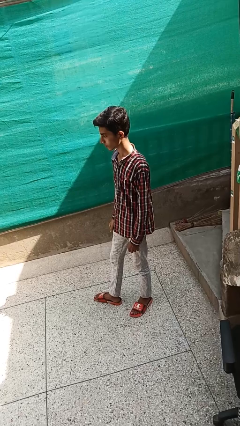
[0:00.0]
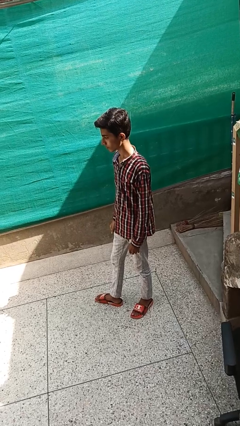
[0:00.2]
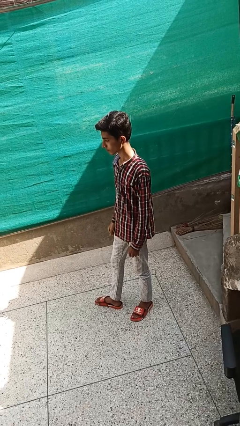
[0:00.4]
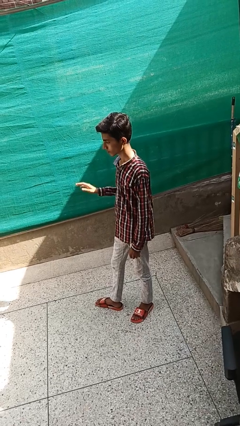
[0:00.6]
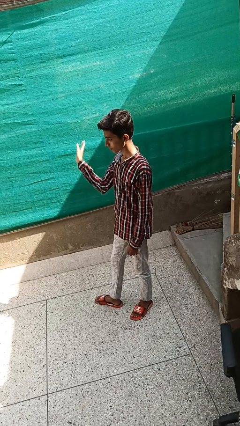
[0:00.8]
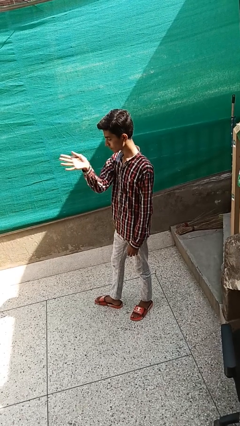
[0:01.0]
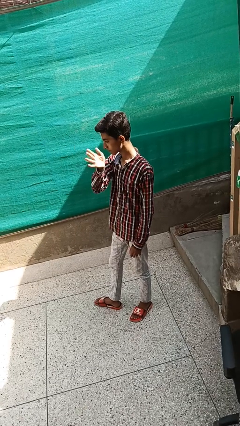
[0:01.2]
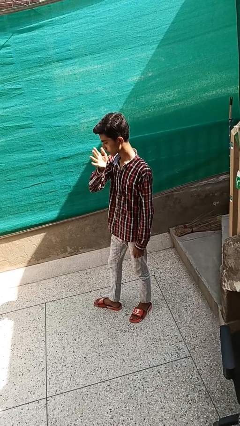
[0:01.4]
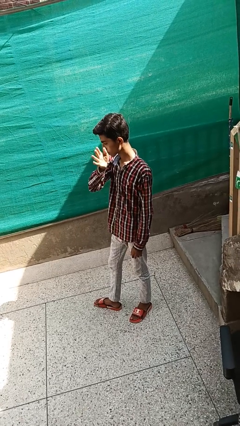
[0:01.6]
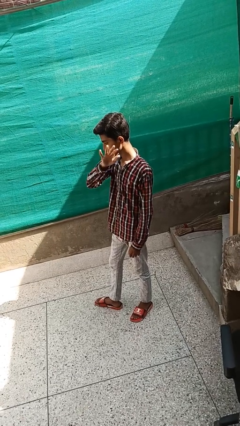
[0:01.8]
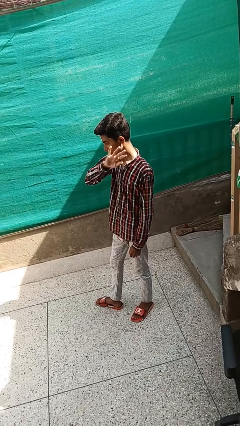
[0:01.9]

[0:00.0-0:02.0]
person gestures swipe left

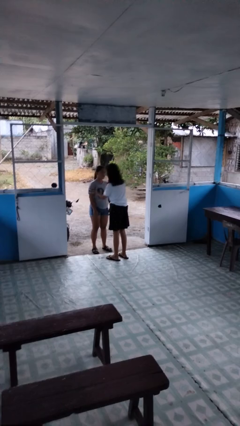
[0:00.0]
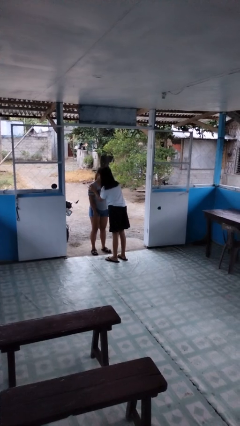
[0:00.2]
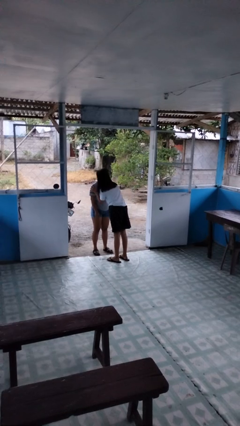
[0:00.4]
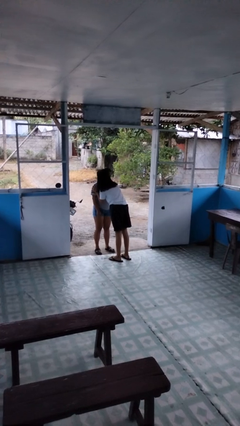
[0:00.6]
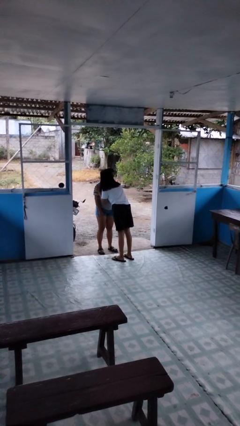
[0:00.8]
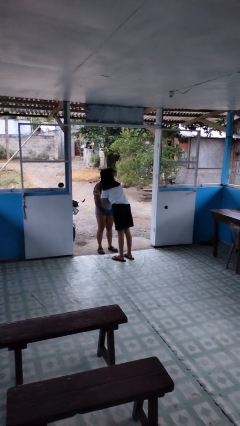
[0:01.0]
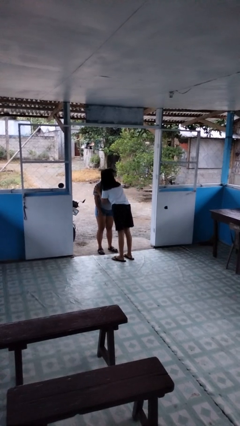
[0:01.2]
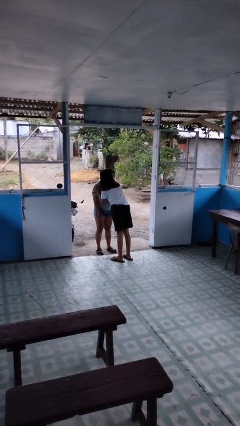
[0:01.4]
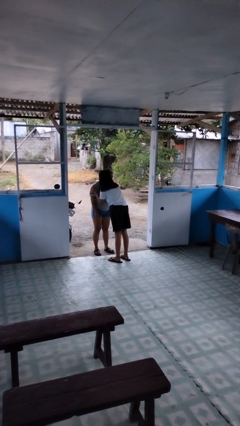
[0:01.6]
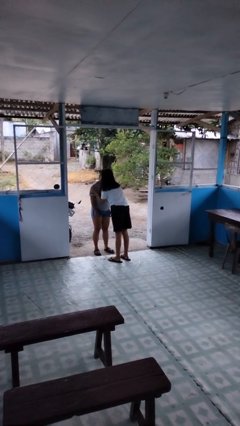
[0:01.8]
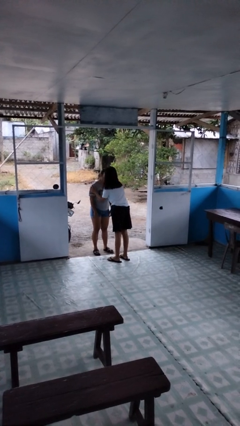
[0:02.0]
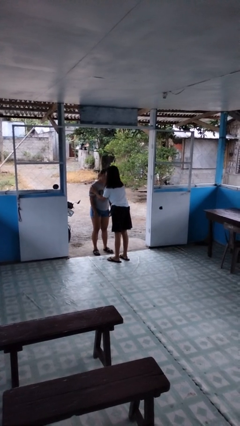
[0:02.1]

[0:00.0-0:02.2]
person kisses cheek of person

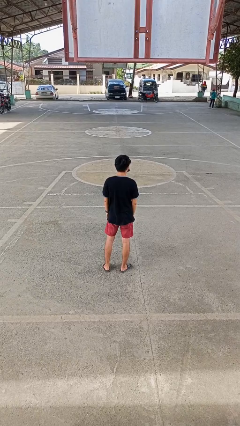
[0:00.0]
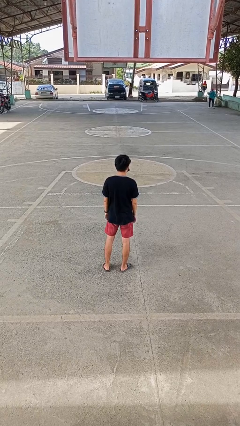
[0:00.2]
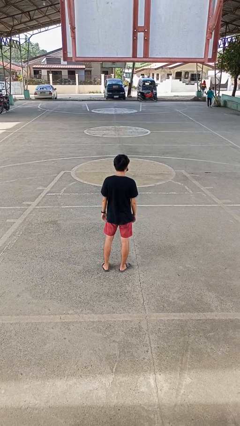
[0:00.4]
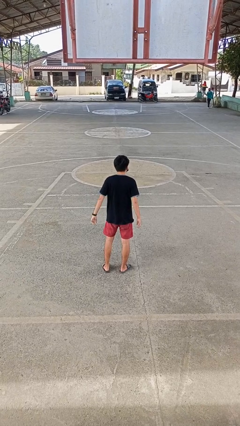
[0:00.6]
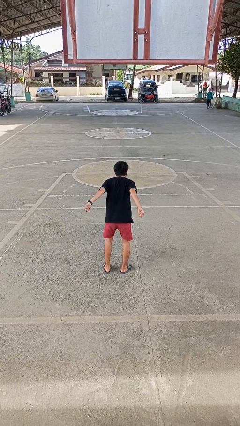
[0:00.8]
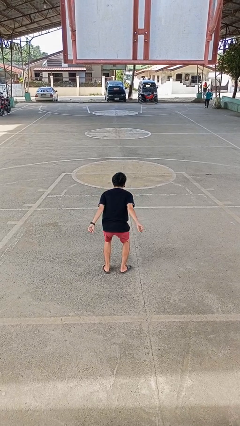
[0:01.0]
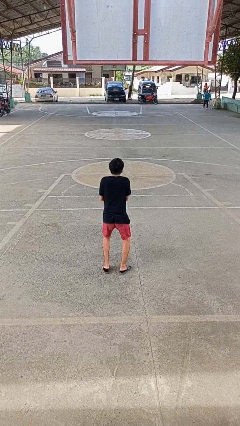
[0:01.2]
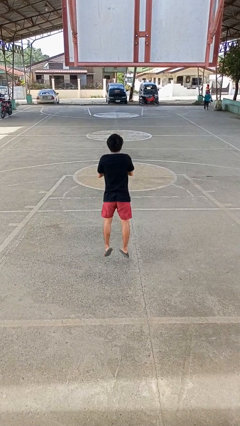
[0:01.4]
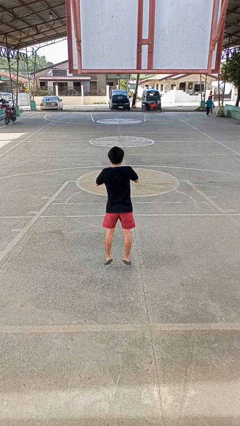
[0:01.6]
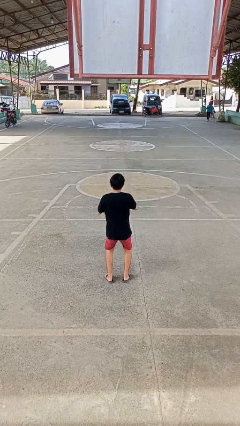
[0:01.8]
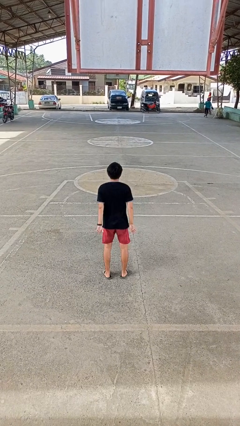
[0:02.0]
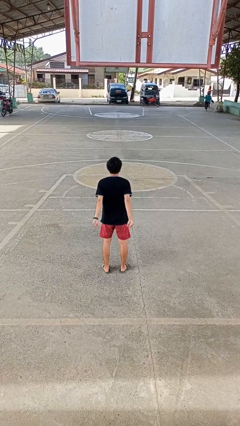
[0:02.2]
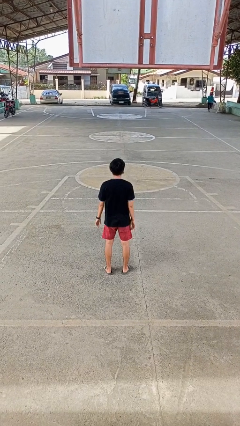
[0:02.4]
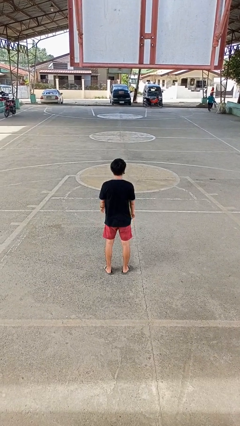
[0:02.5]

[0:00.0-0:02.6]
person jumps

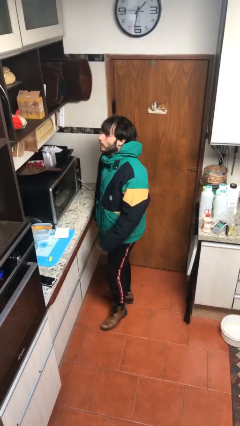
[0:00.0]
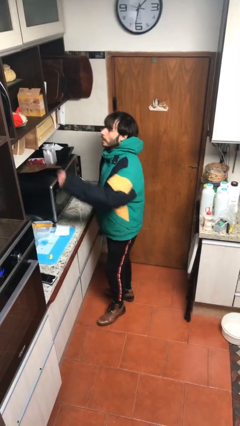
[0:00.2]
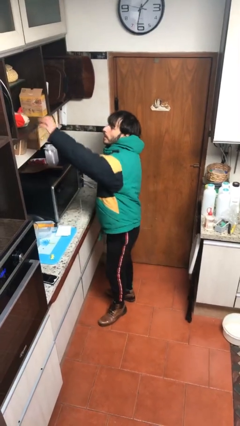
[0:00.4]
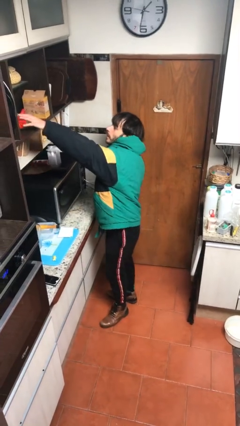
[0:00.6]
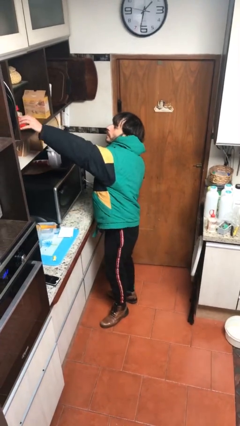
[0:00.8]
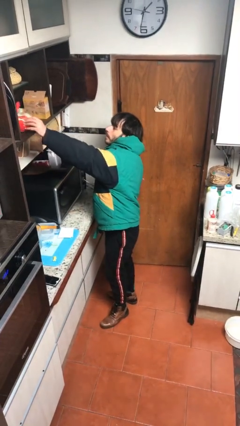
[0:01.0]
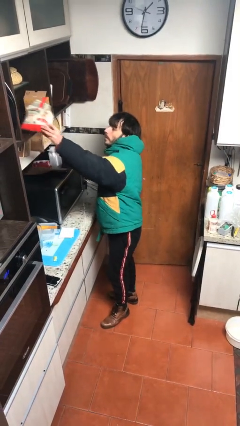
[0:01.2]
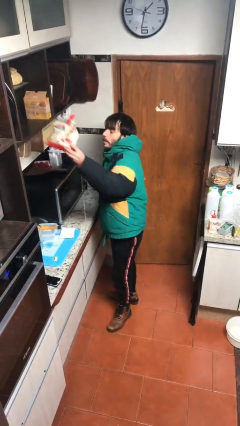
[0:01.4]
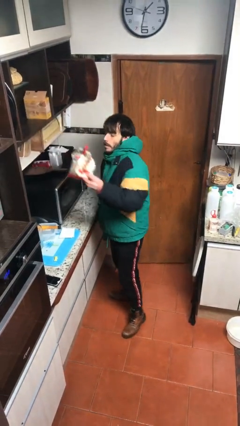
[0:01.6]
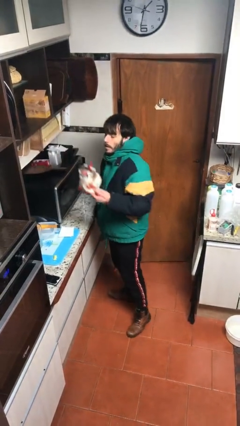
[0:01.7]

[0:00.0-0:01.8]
person picks up object from cabinet

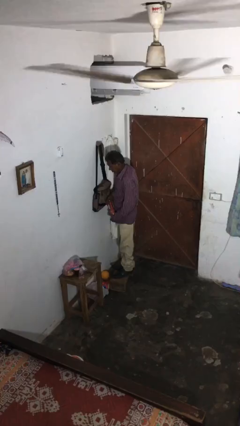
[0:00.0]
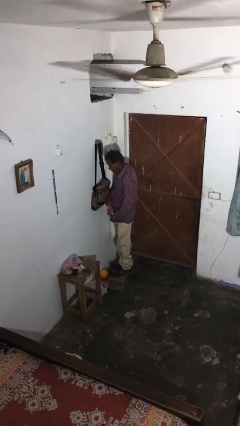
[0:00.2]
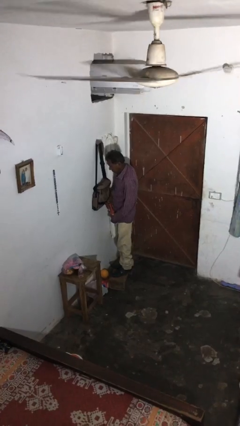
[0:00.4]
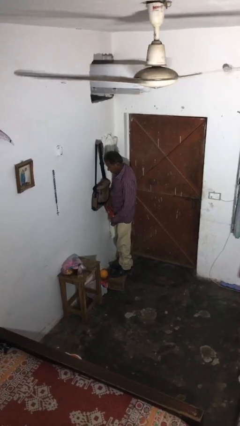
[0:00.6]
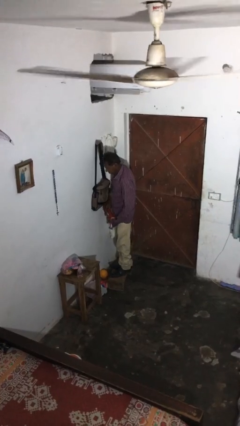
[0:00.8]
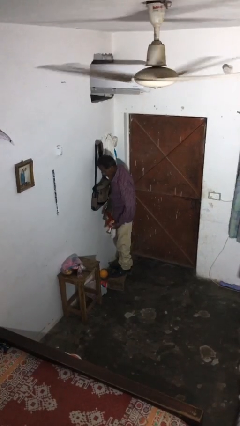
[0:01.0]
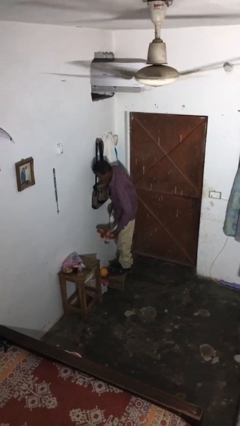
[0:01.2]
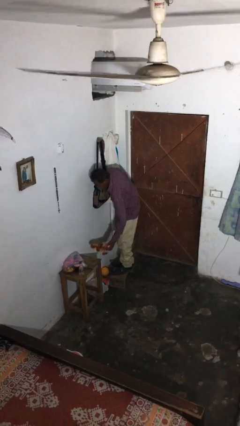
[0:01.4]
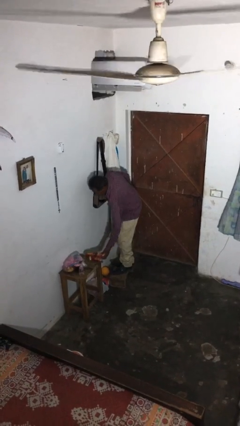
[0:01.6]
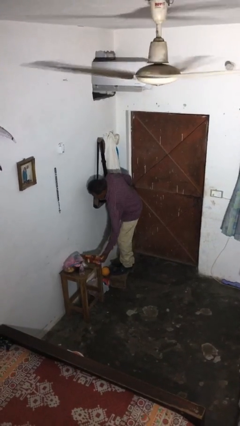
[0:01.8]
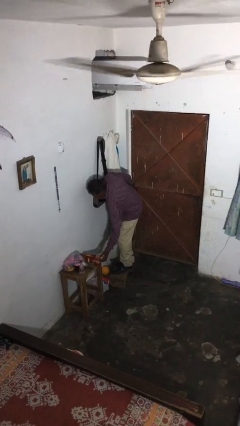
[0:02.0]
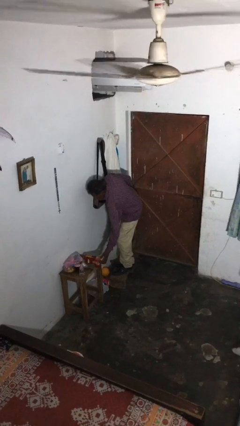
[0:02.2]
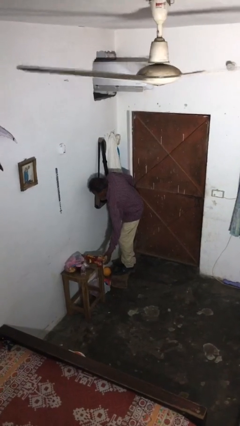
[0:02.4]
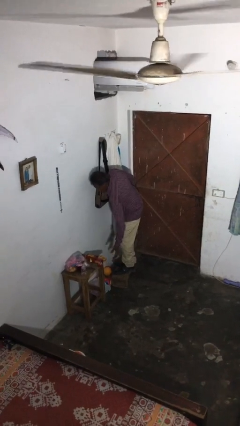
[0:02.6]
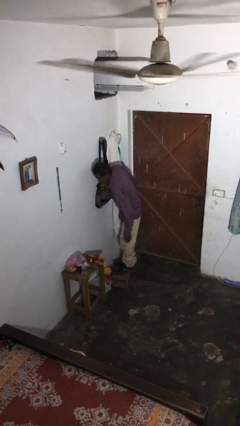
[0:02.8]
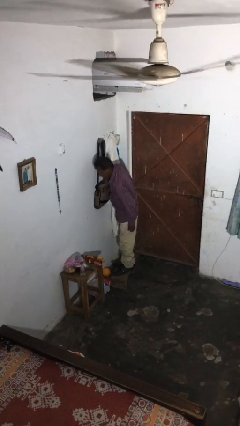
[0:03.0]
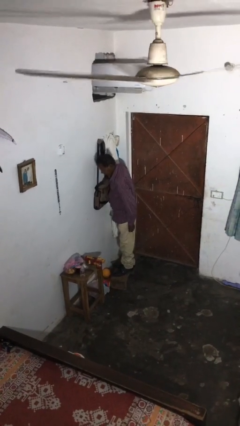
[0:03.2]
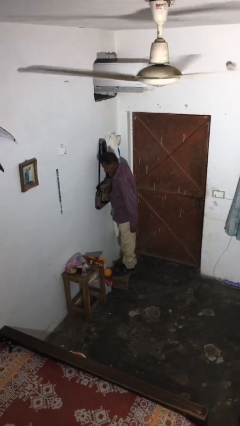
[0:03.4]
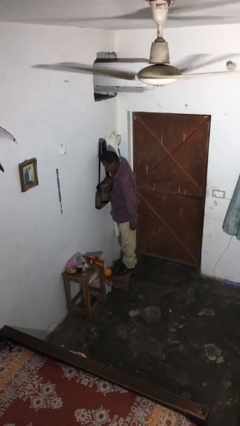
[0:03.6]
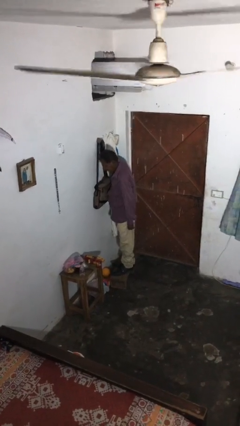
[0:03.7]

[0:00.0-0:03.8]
person puts down object on table

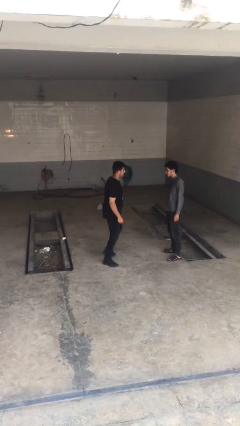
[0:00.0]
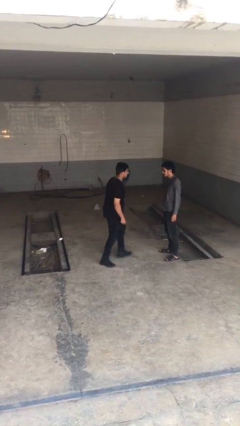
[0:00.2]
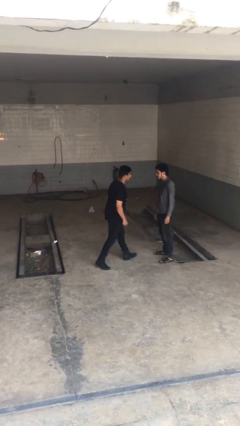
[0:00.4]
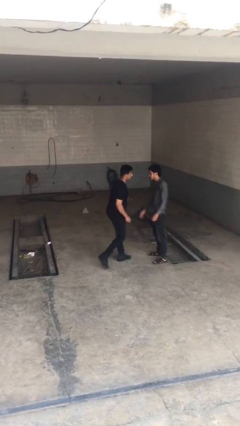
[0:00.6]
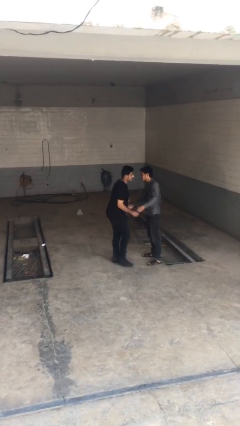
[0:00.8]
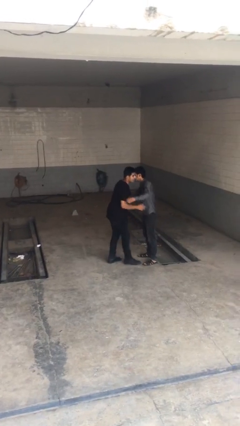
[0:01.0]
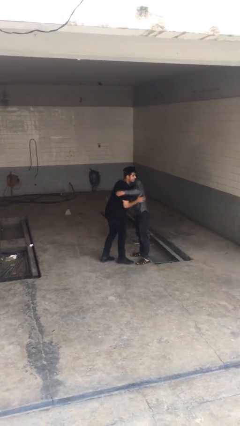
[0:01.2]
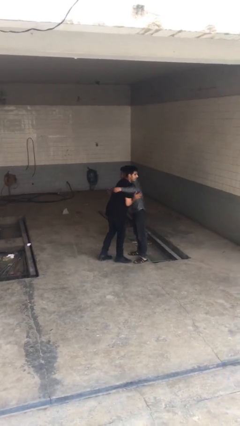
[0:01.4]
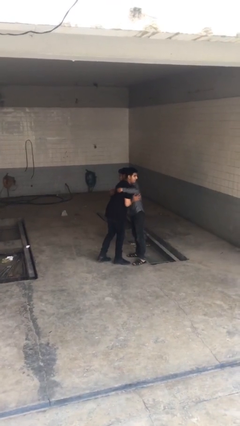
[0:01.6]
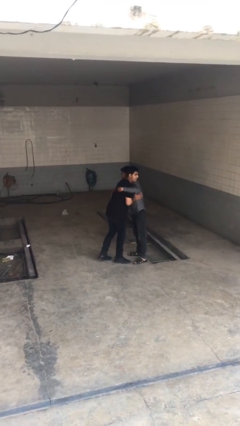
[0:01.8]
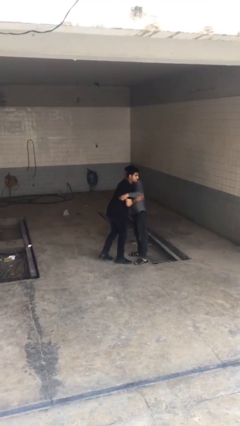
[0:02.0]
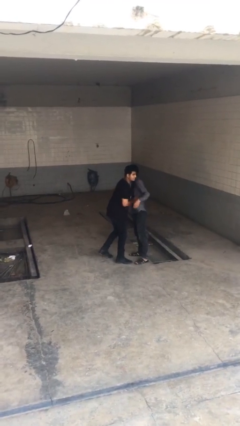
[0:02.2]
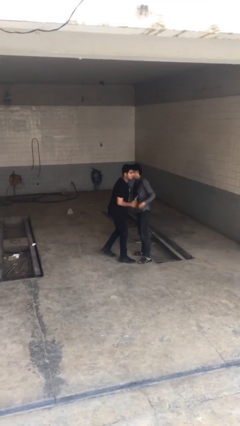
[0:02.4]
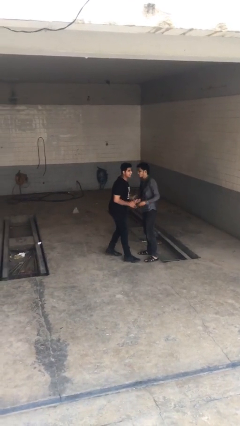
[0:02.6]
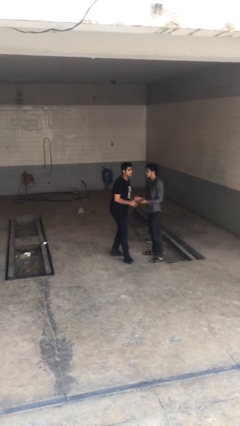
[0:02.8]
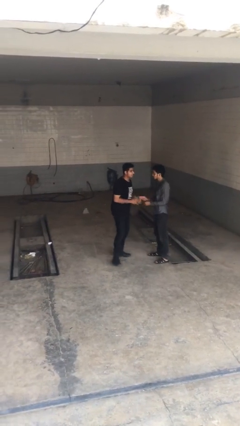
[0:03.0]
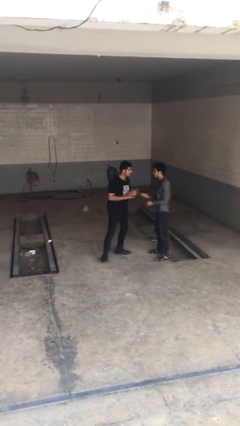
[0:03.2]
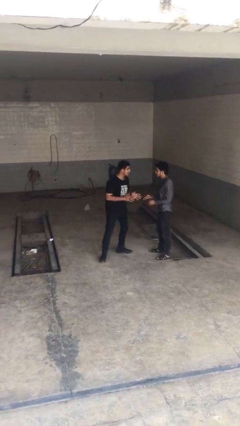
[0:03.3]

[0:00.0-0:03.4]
person embraces person

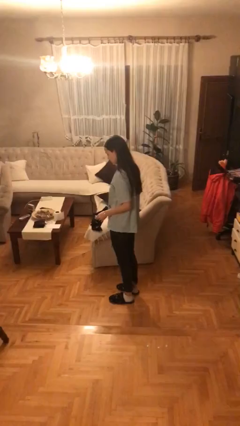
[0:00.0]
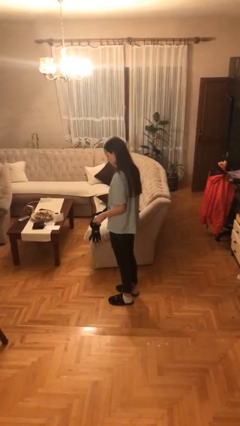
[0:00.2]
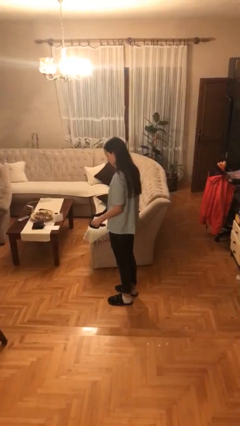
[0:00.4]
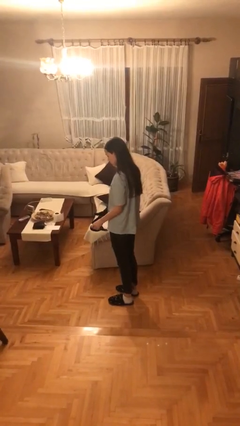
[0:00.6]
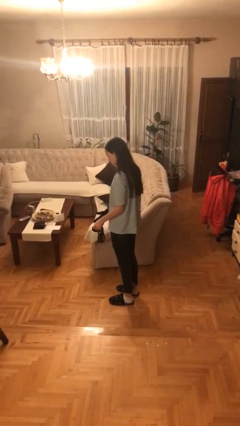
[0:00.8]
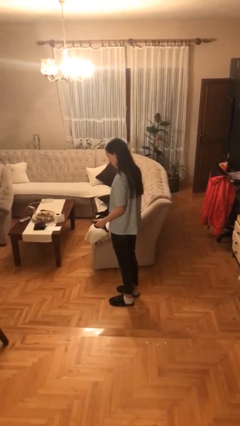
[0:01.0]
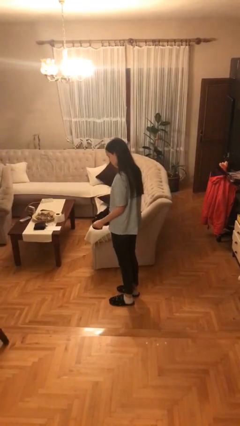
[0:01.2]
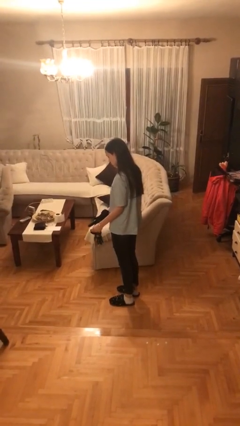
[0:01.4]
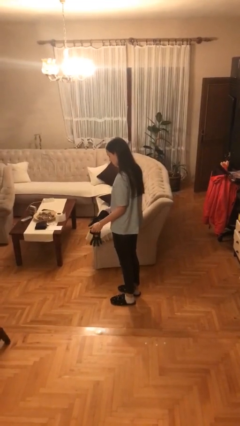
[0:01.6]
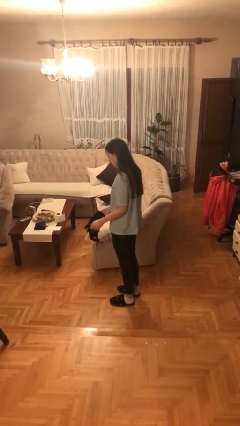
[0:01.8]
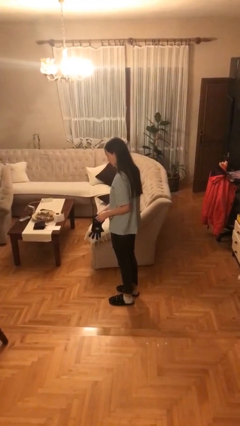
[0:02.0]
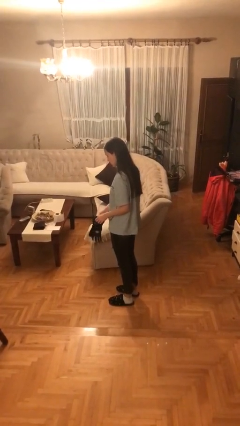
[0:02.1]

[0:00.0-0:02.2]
person takes off gloves
